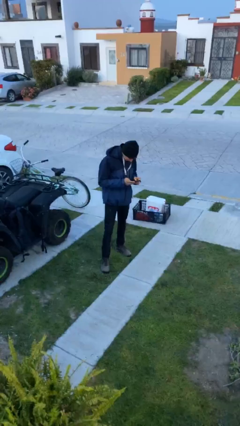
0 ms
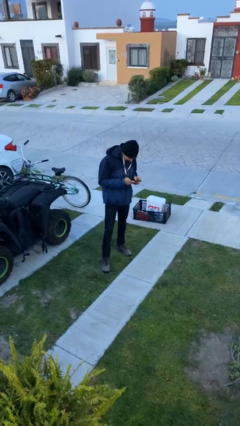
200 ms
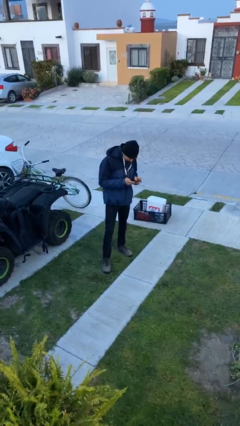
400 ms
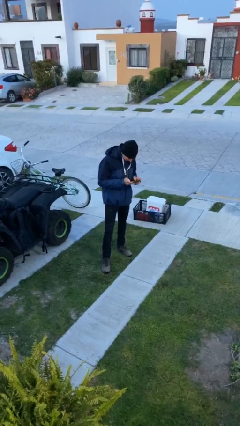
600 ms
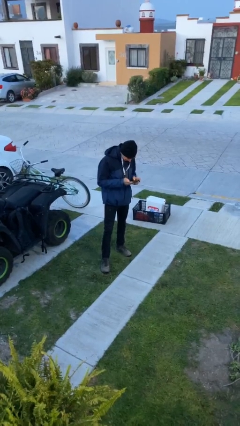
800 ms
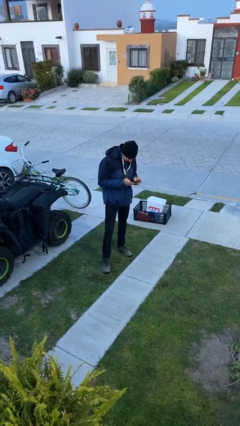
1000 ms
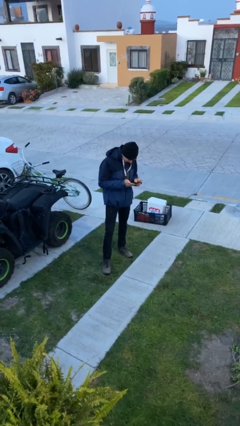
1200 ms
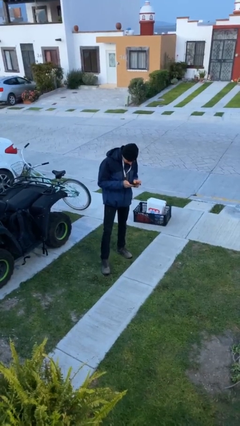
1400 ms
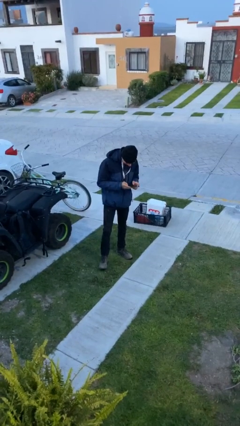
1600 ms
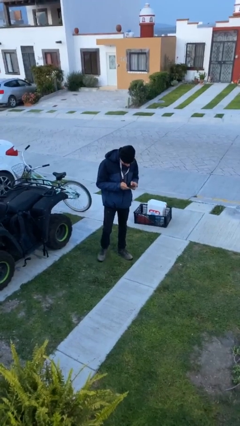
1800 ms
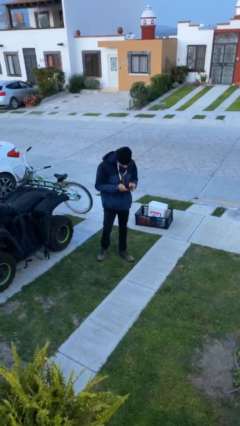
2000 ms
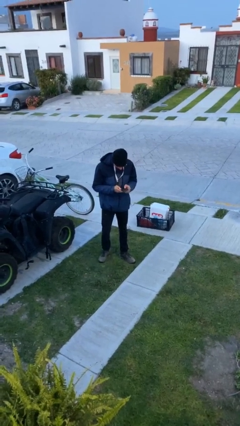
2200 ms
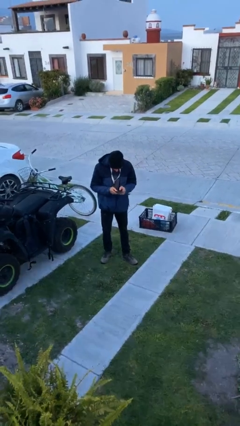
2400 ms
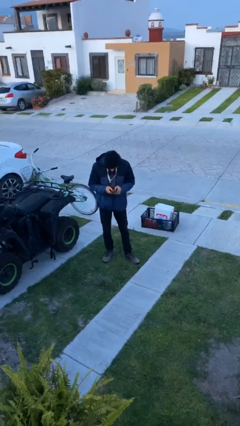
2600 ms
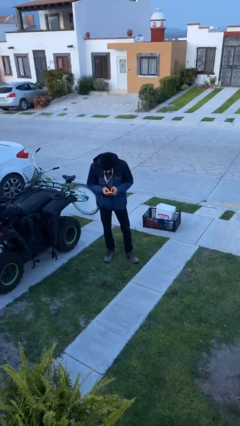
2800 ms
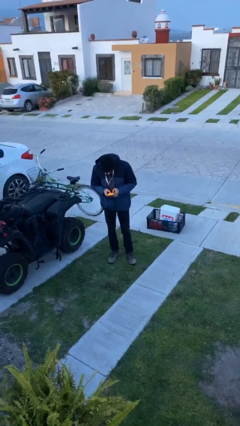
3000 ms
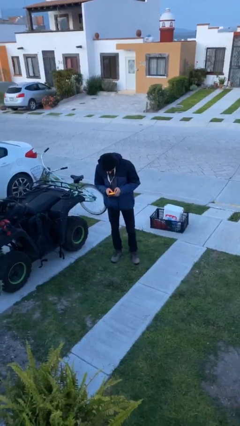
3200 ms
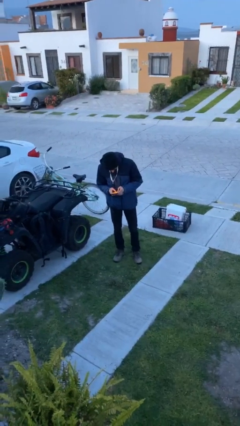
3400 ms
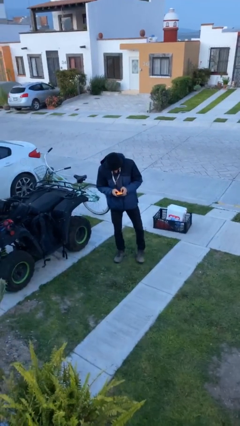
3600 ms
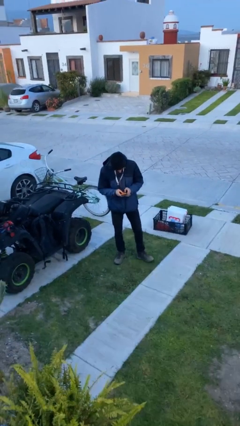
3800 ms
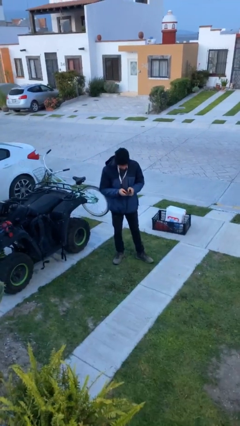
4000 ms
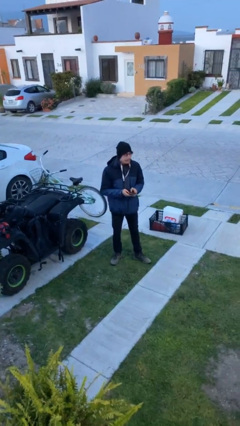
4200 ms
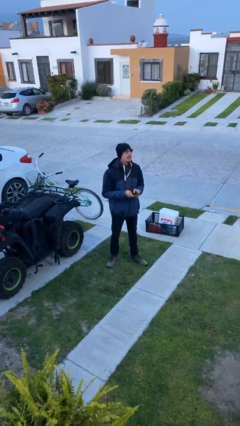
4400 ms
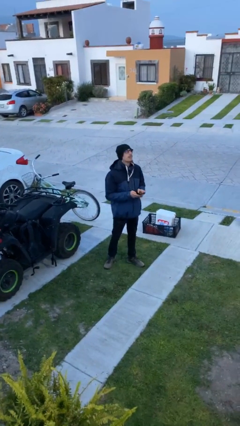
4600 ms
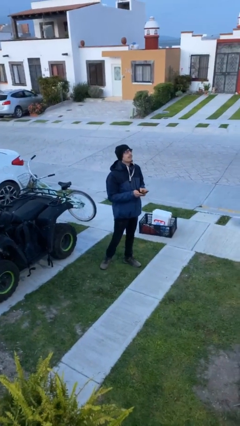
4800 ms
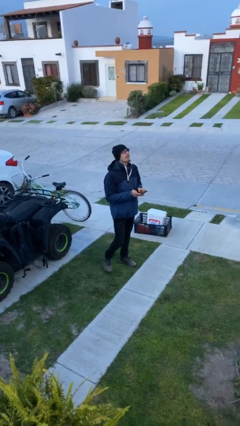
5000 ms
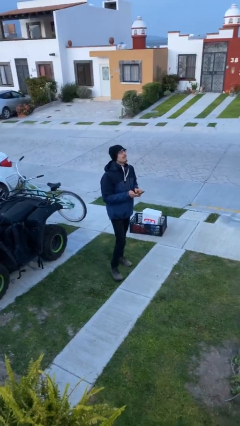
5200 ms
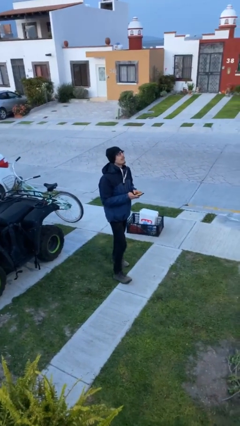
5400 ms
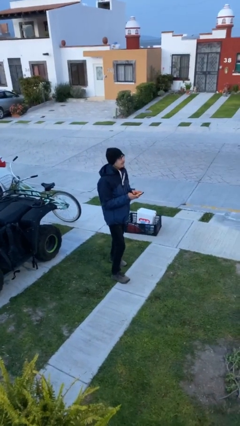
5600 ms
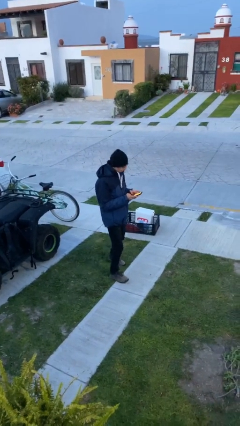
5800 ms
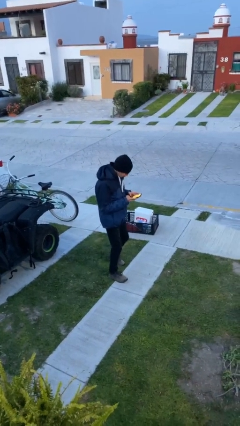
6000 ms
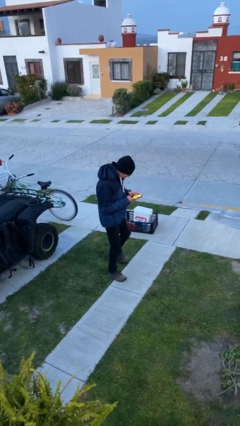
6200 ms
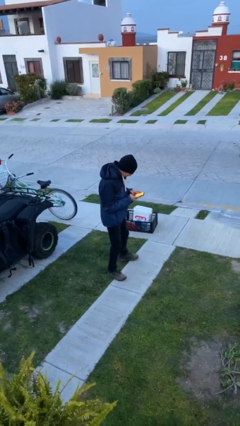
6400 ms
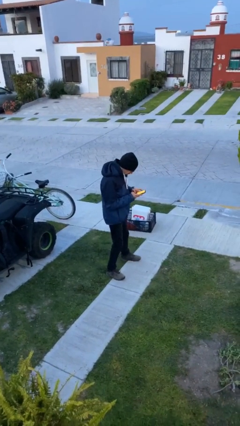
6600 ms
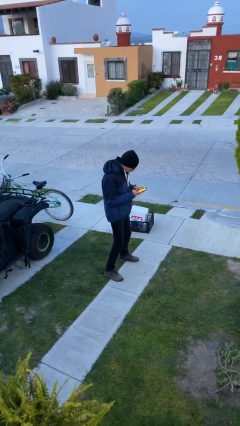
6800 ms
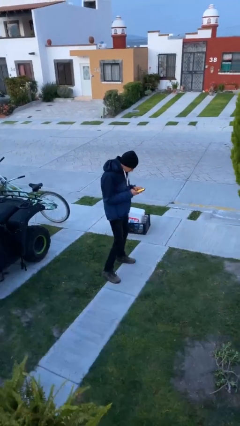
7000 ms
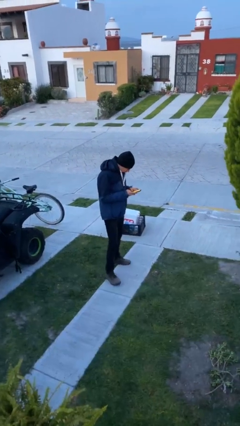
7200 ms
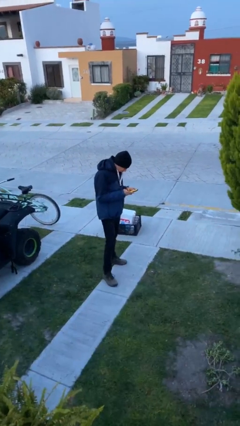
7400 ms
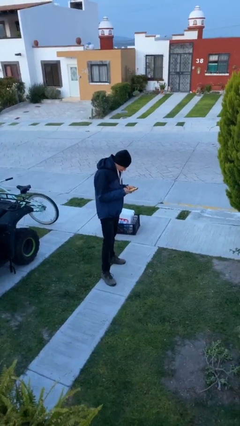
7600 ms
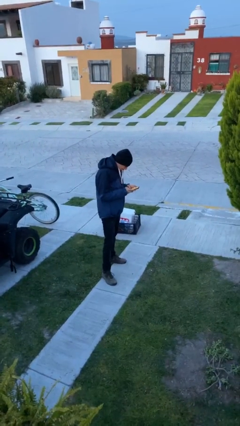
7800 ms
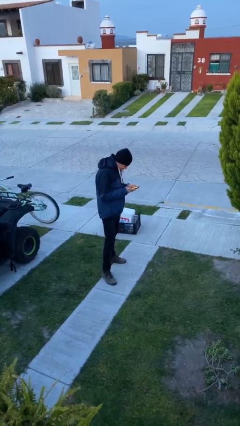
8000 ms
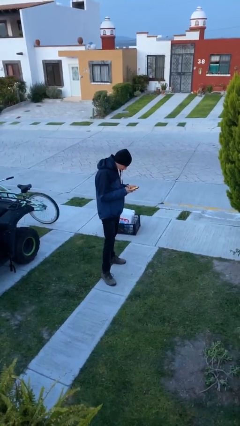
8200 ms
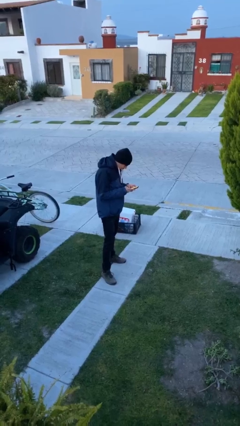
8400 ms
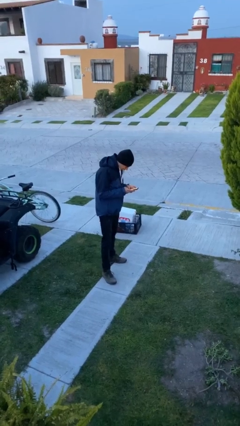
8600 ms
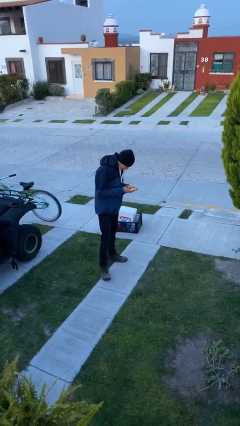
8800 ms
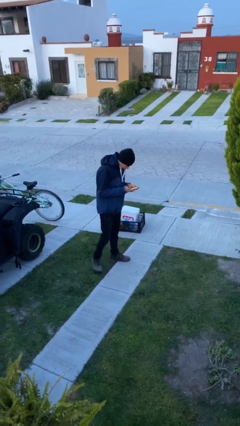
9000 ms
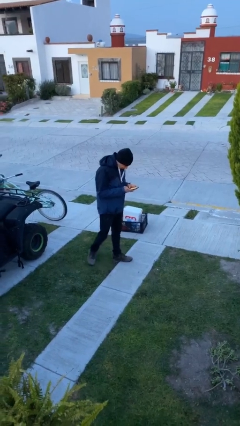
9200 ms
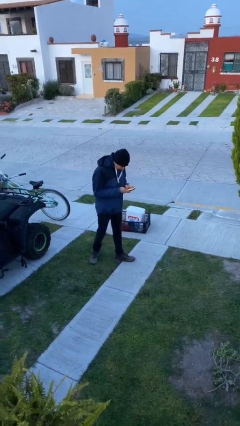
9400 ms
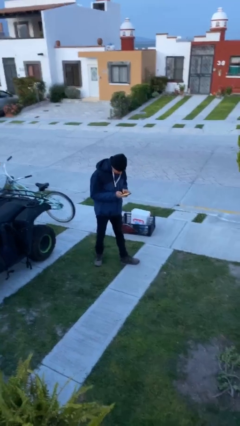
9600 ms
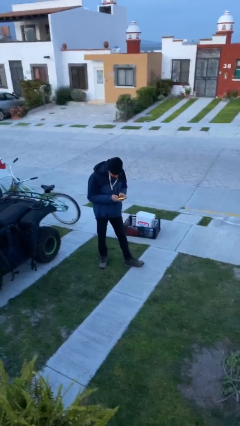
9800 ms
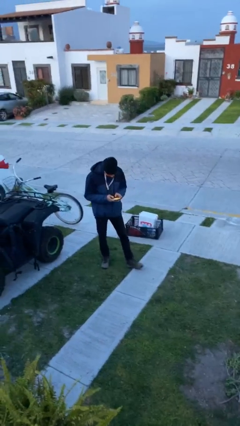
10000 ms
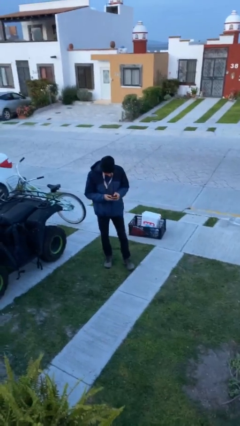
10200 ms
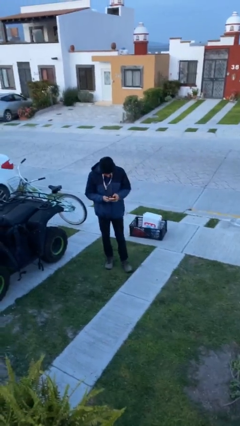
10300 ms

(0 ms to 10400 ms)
person texts on phone

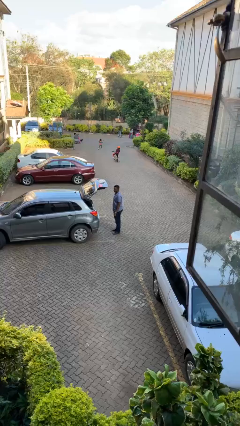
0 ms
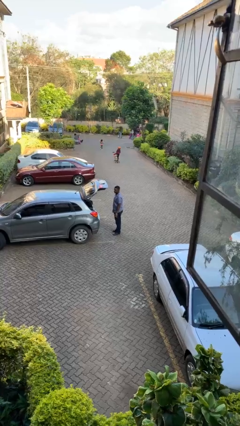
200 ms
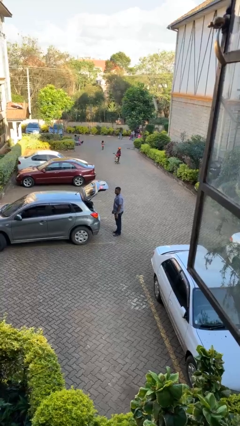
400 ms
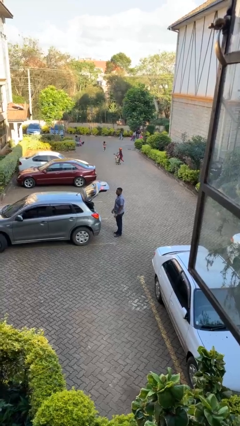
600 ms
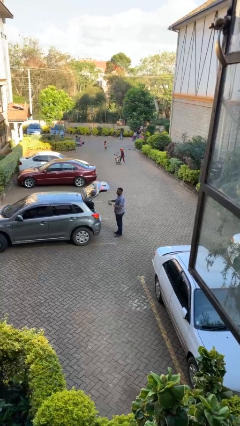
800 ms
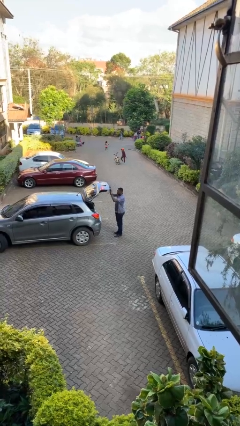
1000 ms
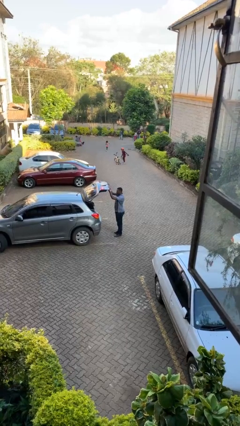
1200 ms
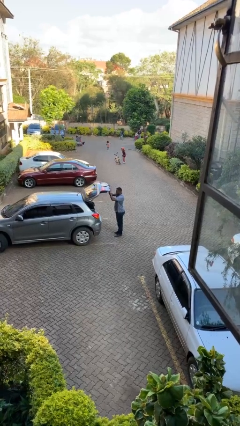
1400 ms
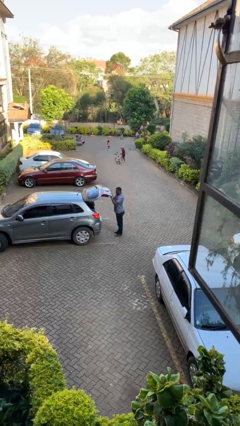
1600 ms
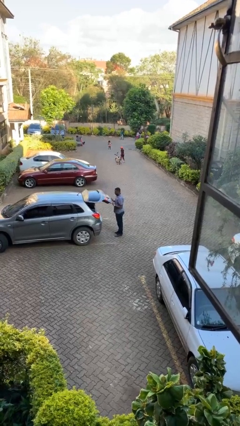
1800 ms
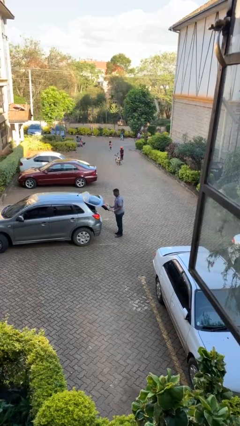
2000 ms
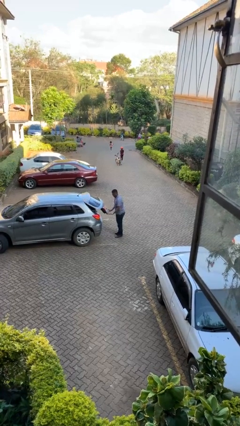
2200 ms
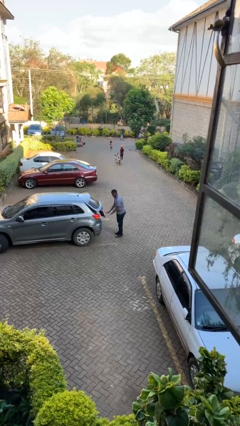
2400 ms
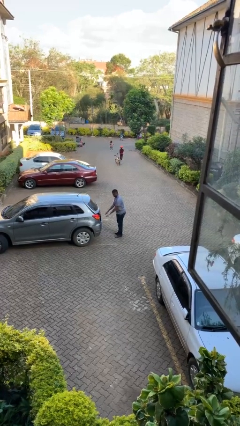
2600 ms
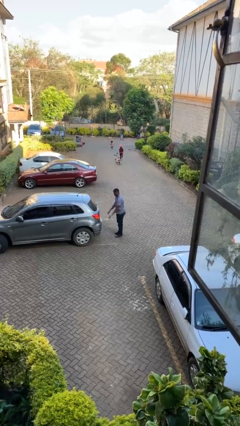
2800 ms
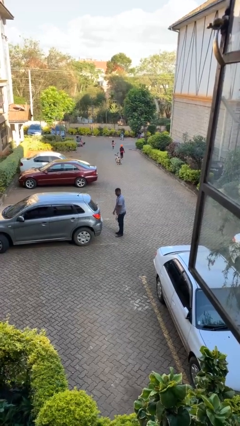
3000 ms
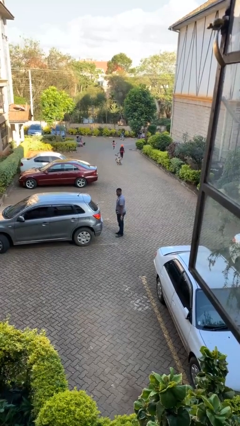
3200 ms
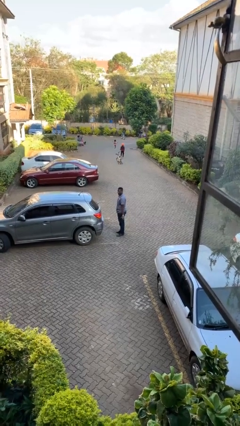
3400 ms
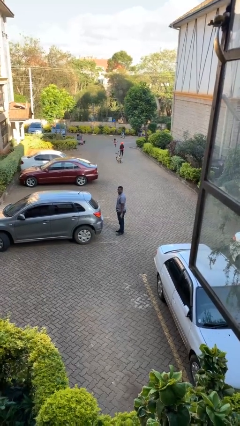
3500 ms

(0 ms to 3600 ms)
person closes car trunk

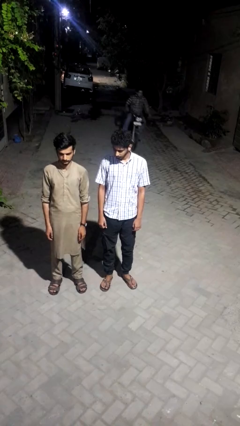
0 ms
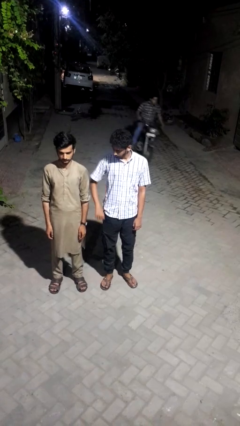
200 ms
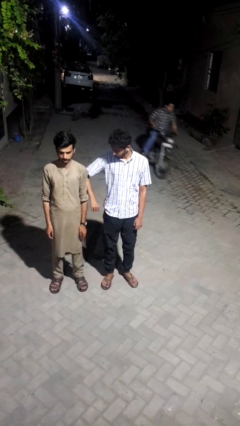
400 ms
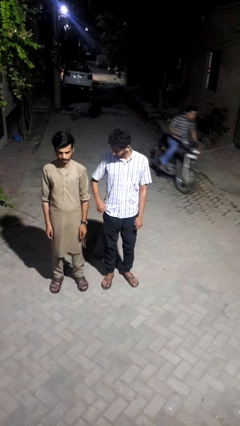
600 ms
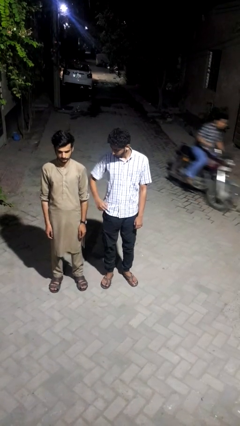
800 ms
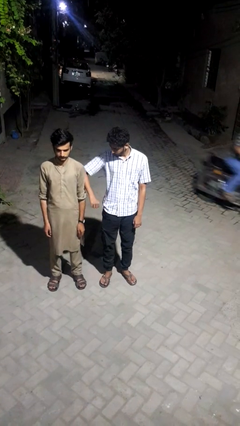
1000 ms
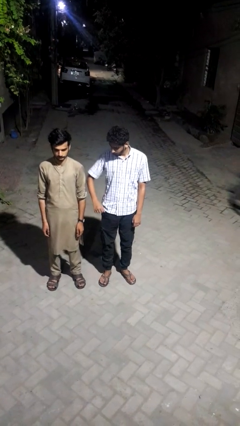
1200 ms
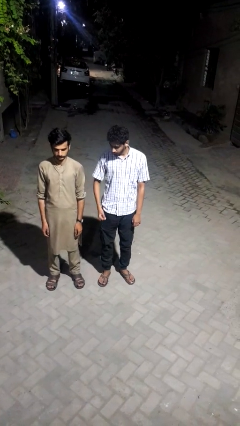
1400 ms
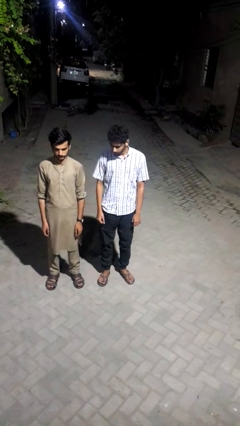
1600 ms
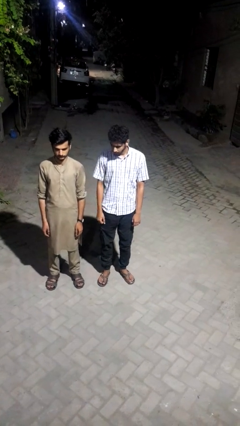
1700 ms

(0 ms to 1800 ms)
person nudges person with elbow

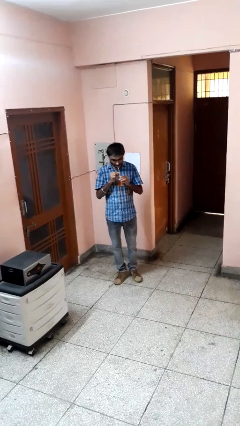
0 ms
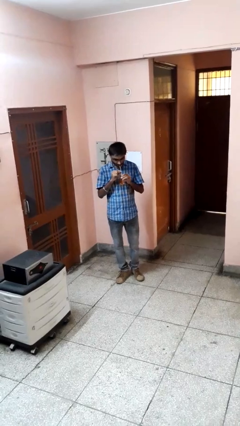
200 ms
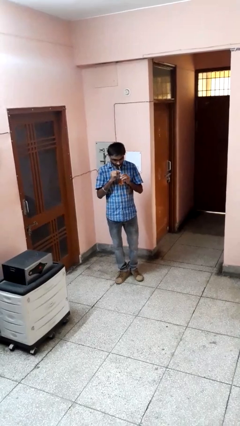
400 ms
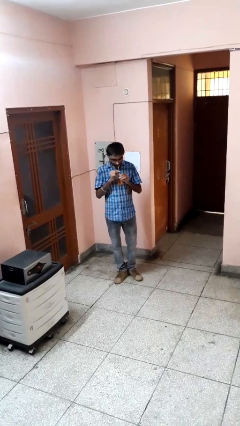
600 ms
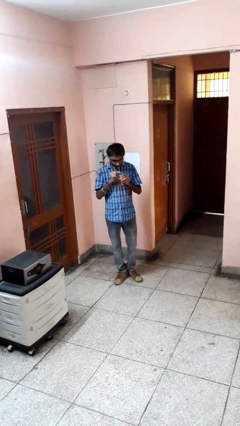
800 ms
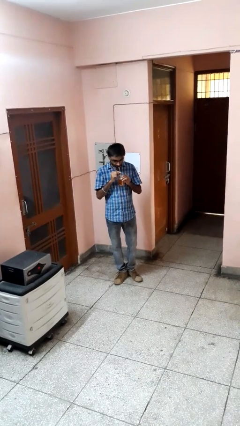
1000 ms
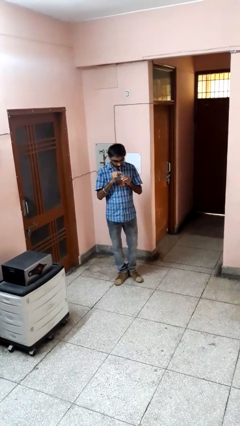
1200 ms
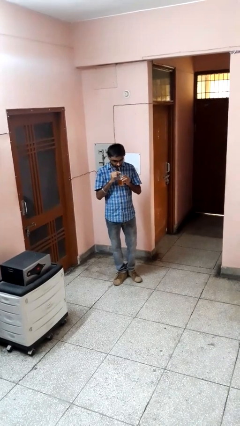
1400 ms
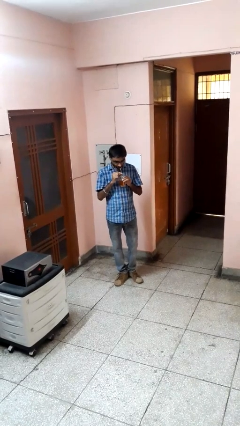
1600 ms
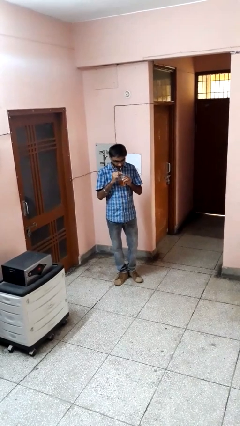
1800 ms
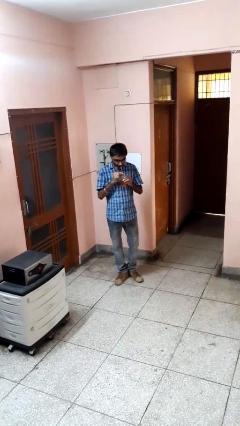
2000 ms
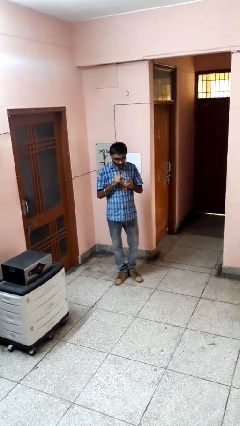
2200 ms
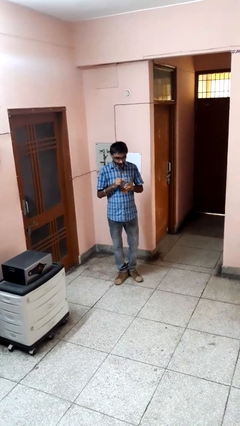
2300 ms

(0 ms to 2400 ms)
person drinks from straw

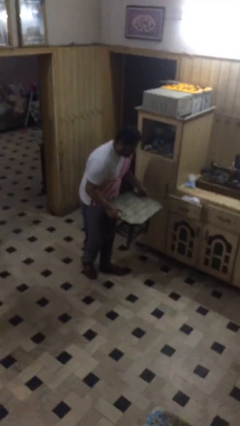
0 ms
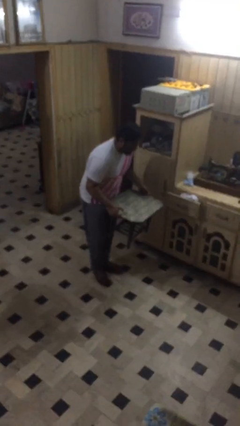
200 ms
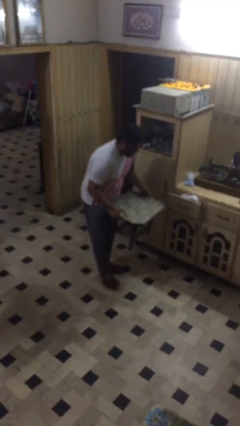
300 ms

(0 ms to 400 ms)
person puts down object on floor
